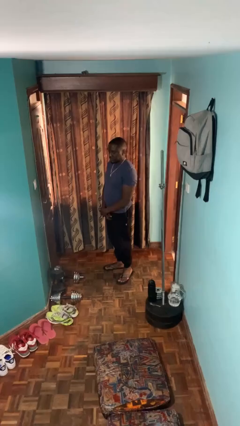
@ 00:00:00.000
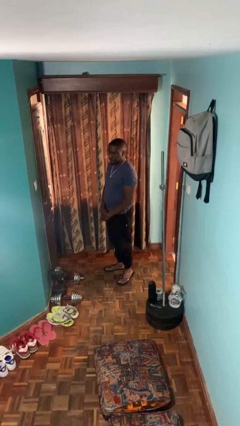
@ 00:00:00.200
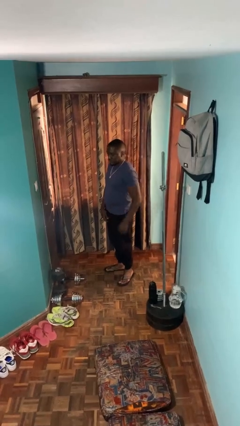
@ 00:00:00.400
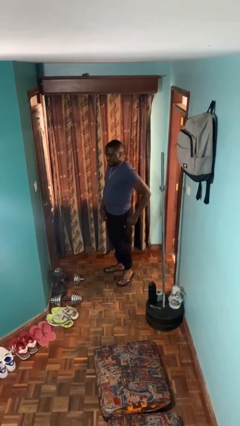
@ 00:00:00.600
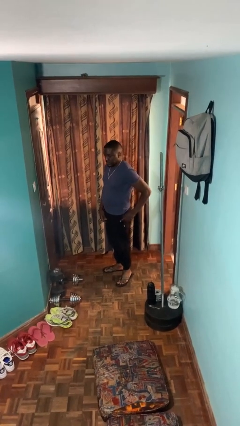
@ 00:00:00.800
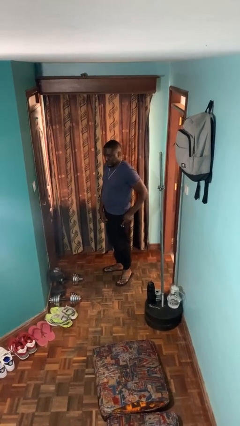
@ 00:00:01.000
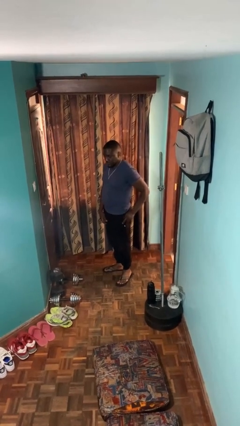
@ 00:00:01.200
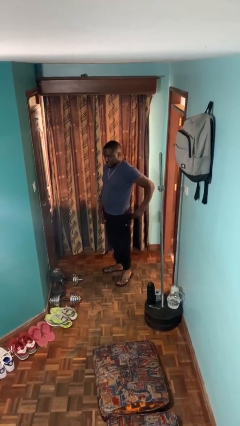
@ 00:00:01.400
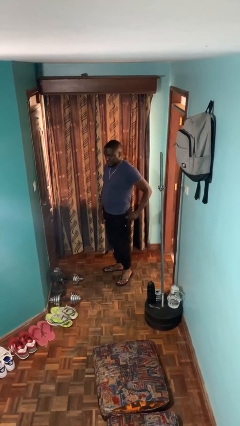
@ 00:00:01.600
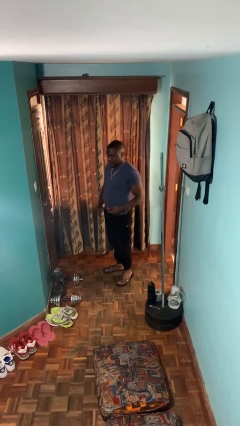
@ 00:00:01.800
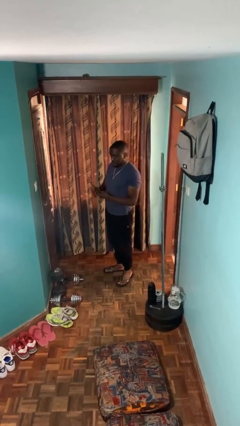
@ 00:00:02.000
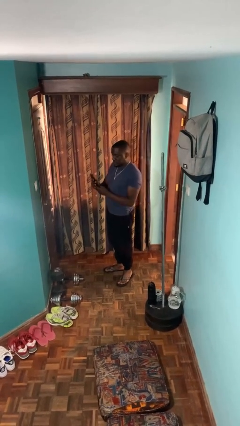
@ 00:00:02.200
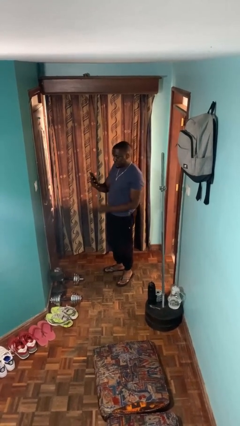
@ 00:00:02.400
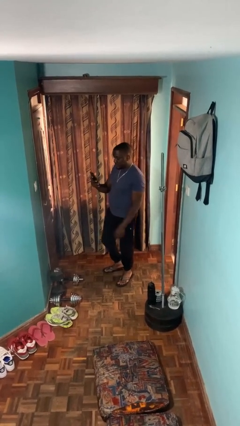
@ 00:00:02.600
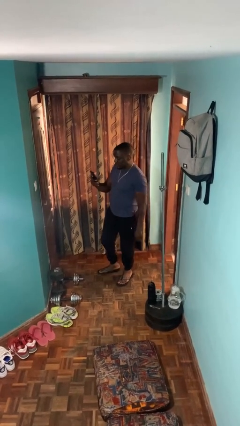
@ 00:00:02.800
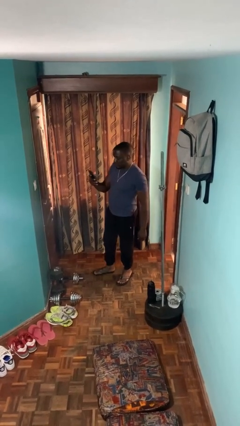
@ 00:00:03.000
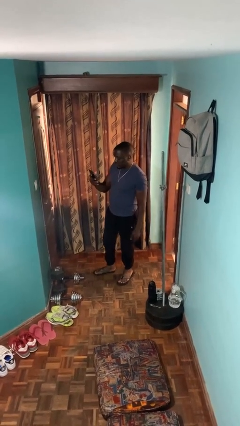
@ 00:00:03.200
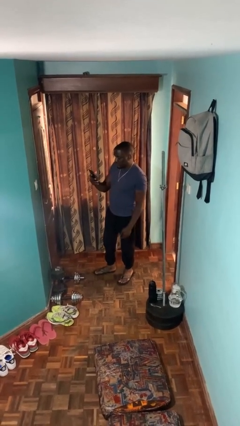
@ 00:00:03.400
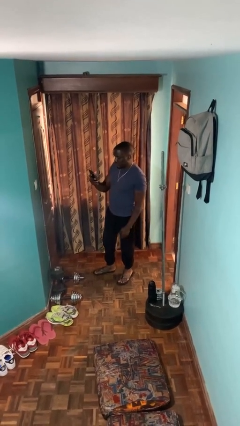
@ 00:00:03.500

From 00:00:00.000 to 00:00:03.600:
person takes phone from pocket

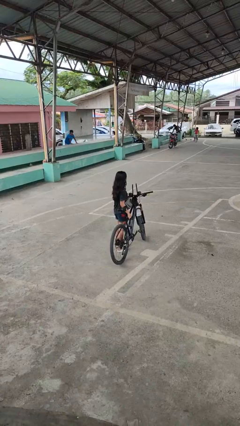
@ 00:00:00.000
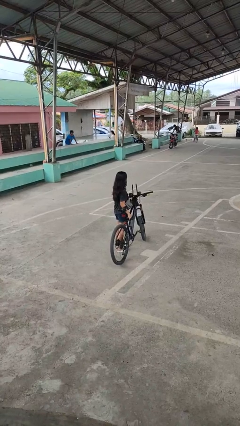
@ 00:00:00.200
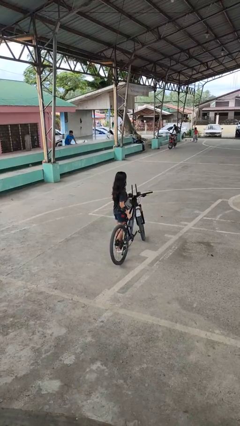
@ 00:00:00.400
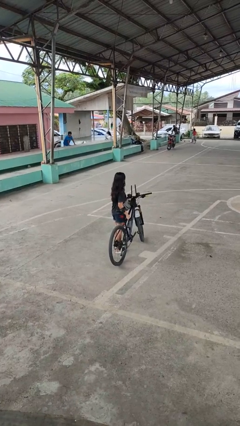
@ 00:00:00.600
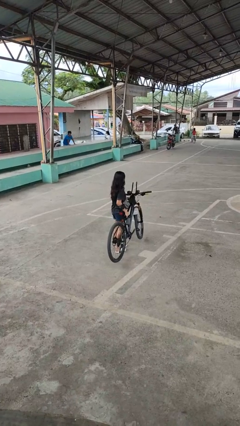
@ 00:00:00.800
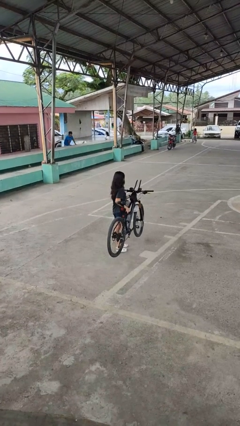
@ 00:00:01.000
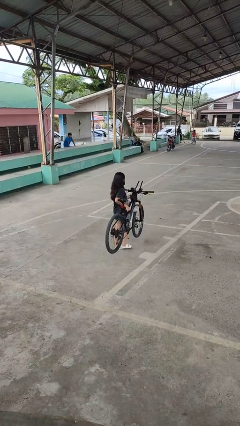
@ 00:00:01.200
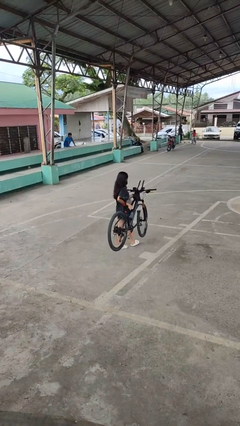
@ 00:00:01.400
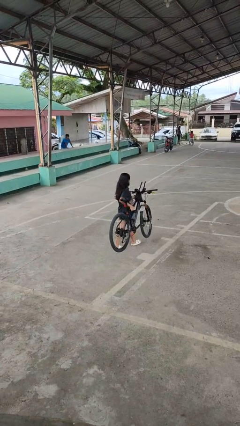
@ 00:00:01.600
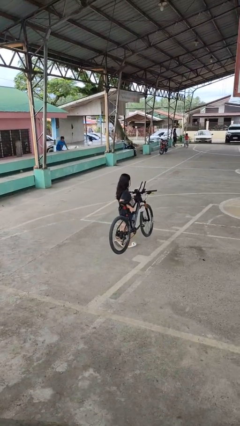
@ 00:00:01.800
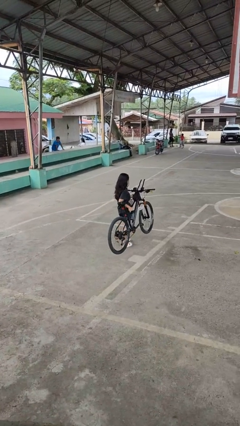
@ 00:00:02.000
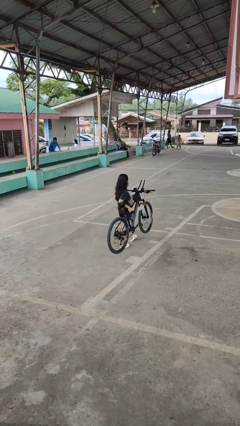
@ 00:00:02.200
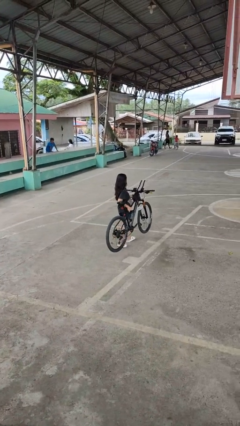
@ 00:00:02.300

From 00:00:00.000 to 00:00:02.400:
person carries bicycle

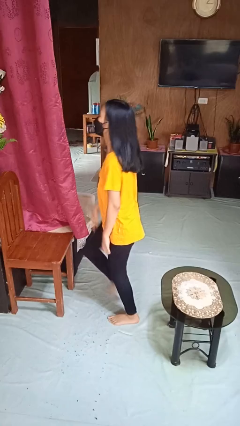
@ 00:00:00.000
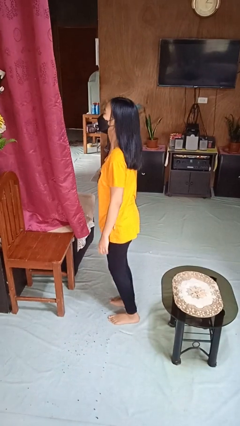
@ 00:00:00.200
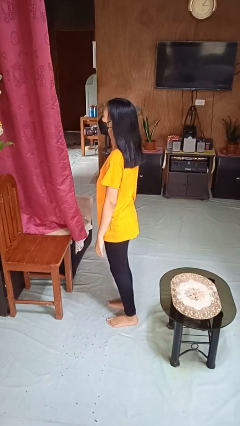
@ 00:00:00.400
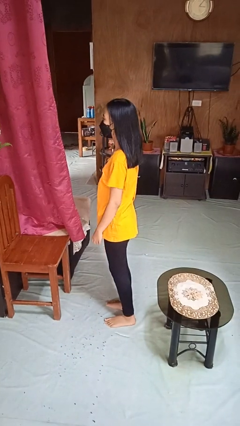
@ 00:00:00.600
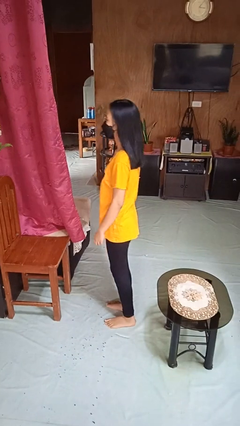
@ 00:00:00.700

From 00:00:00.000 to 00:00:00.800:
person climbs off chair

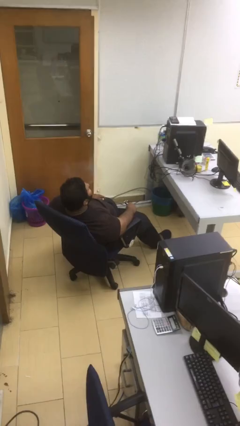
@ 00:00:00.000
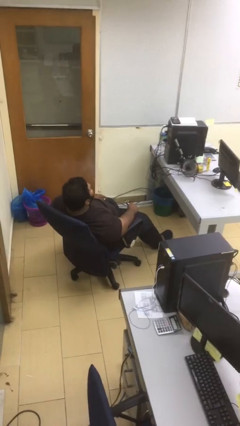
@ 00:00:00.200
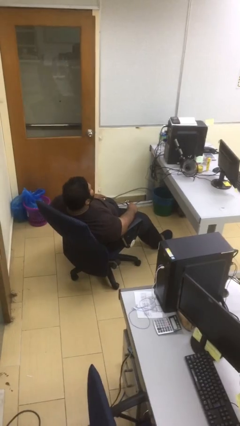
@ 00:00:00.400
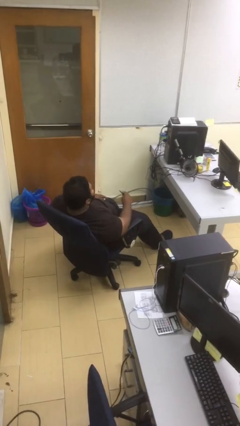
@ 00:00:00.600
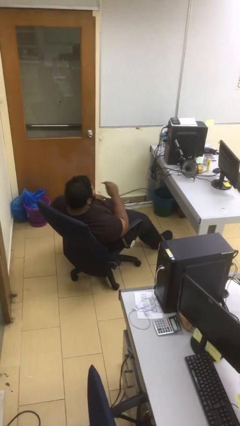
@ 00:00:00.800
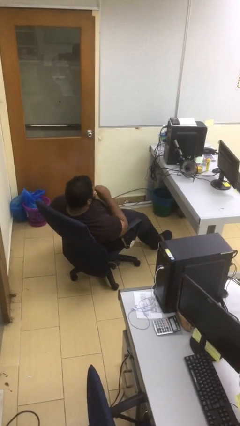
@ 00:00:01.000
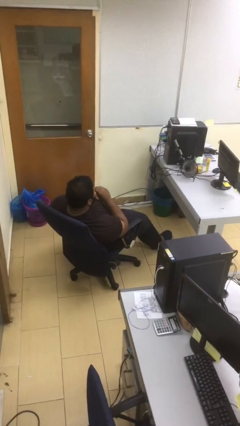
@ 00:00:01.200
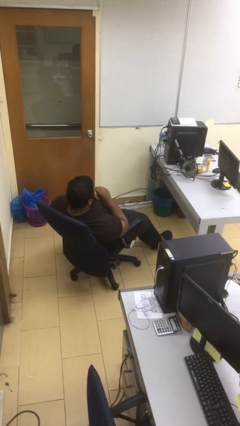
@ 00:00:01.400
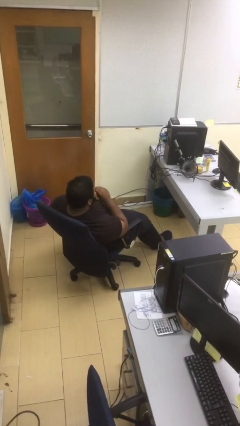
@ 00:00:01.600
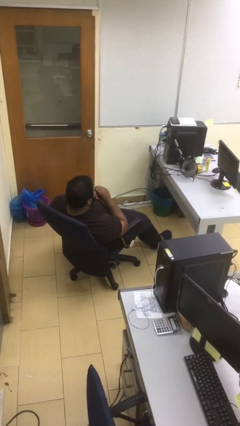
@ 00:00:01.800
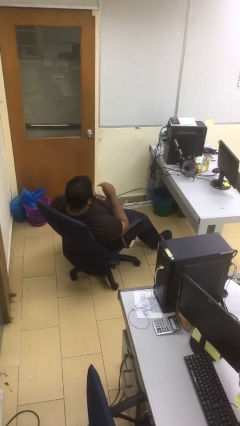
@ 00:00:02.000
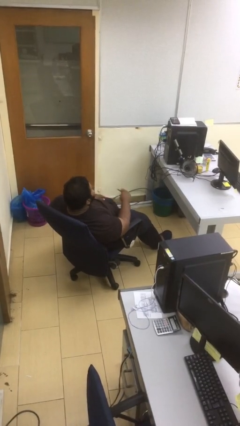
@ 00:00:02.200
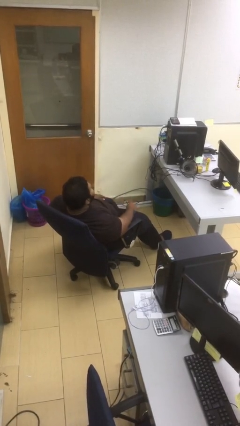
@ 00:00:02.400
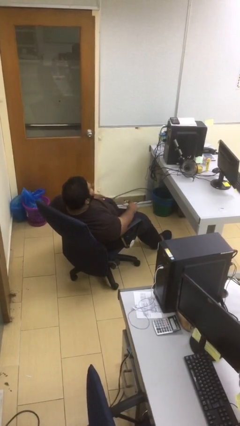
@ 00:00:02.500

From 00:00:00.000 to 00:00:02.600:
person vapes

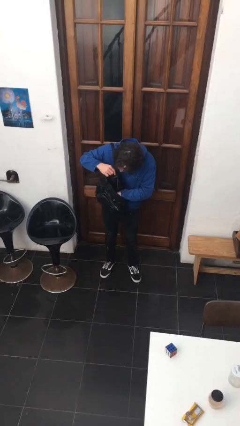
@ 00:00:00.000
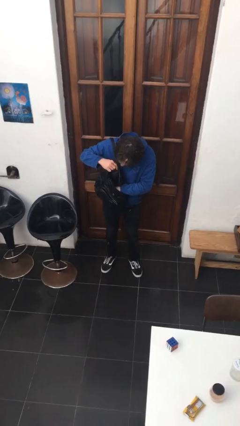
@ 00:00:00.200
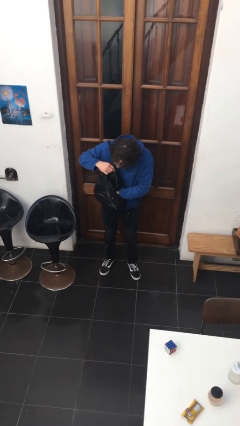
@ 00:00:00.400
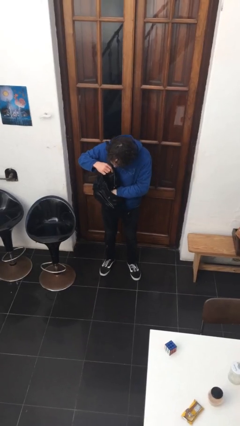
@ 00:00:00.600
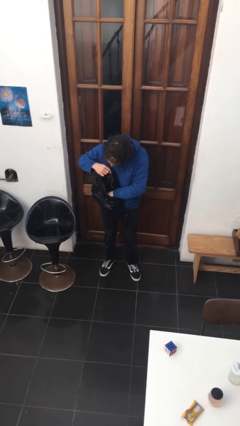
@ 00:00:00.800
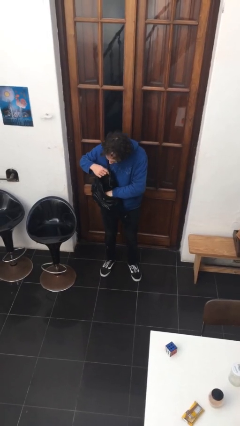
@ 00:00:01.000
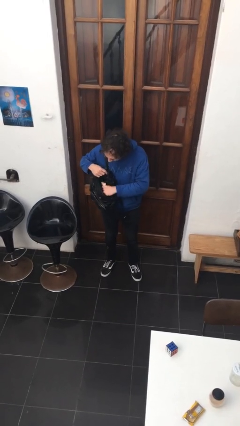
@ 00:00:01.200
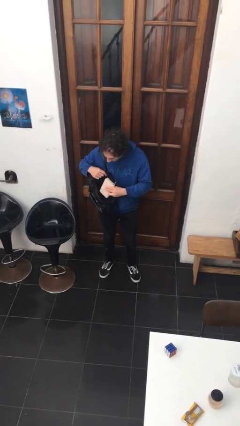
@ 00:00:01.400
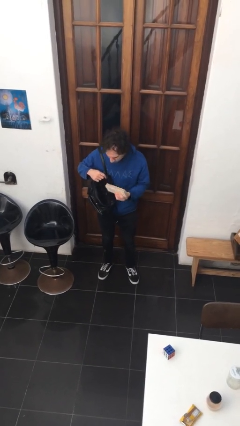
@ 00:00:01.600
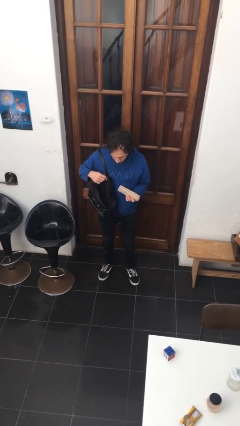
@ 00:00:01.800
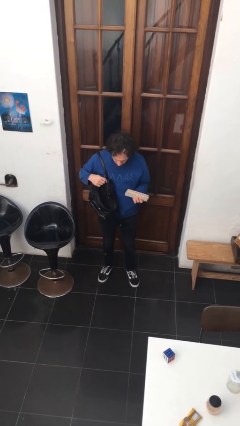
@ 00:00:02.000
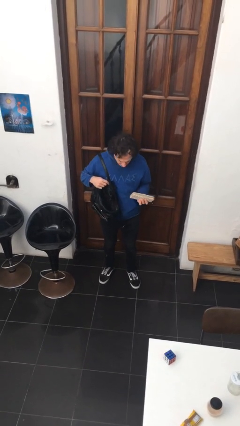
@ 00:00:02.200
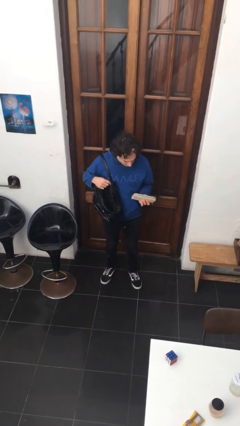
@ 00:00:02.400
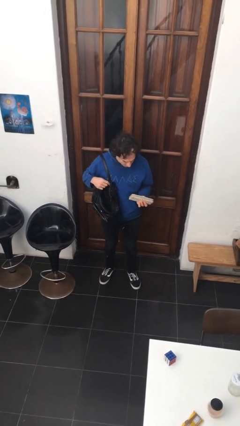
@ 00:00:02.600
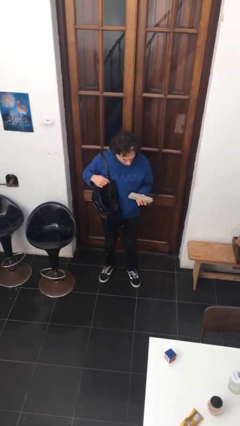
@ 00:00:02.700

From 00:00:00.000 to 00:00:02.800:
person takes object from purse

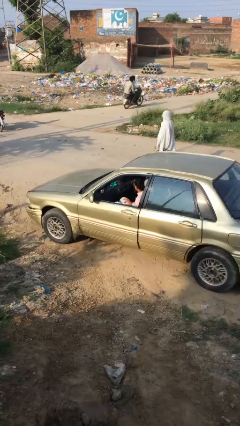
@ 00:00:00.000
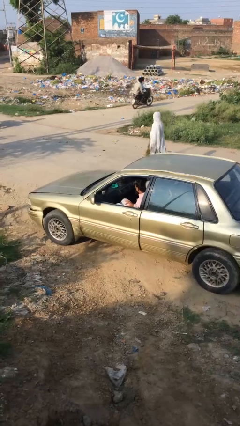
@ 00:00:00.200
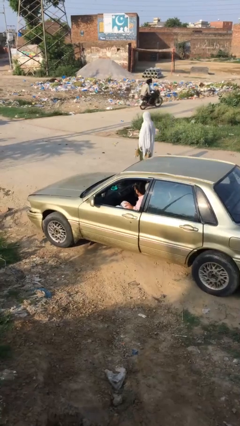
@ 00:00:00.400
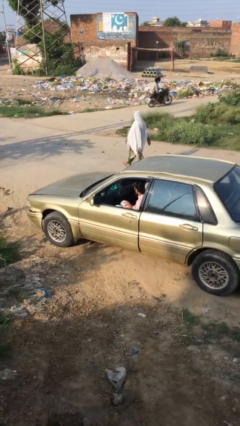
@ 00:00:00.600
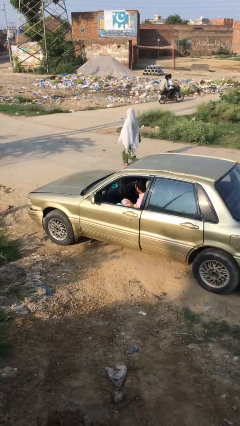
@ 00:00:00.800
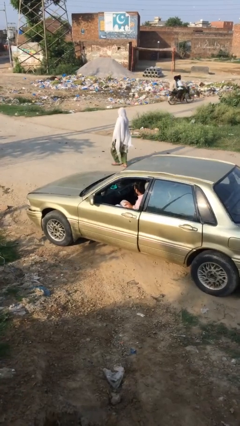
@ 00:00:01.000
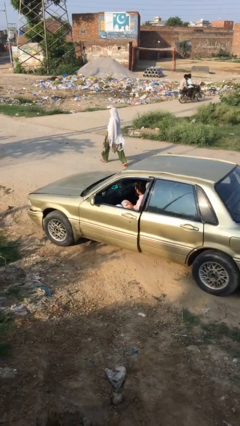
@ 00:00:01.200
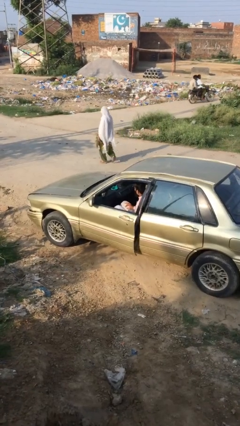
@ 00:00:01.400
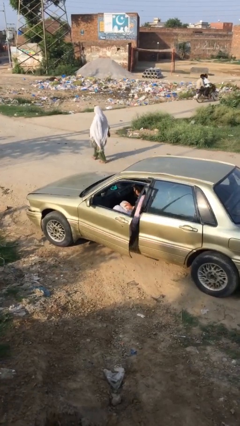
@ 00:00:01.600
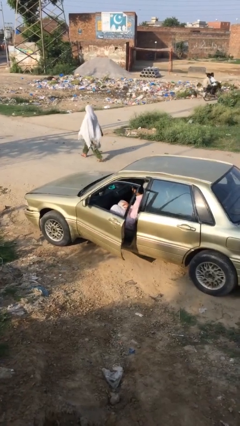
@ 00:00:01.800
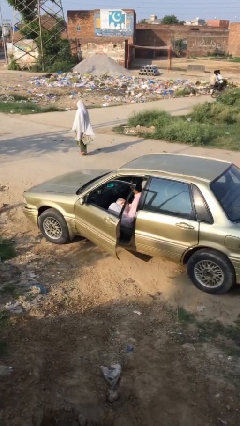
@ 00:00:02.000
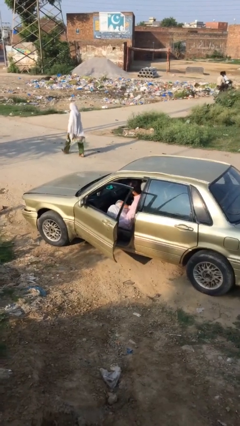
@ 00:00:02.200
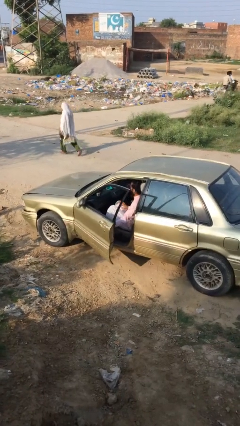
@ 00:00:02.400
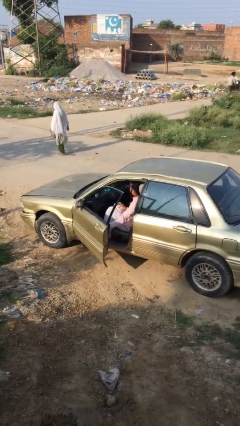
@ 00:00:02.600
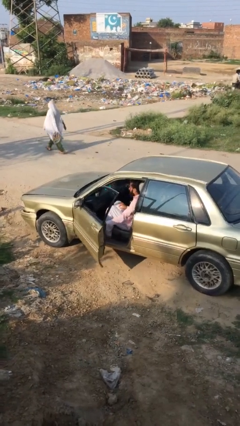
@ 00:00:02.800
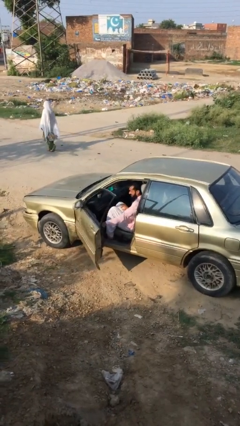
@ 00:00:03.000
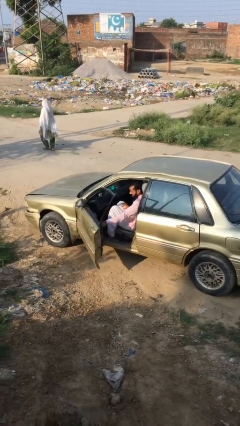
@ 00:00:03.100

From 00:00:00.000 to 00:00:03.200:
person opens car door

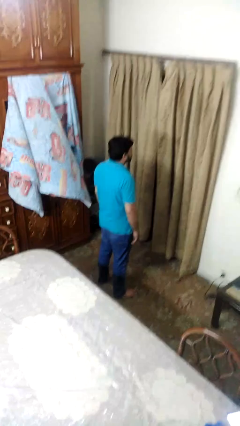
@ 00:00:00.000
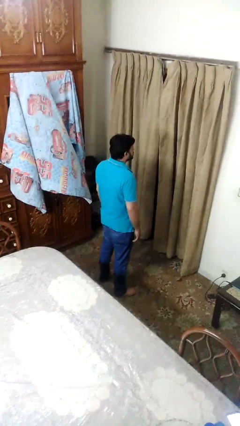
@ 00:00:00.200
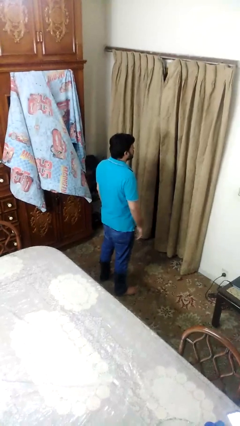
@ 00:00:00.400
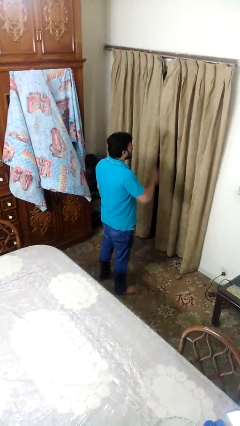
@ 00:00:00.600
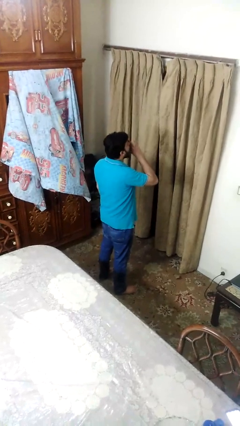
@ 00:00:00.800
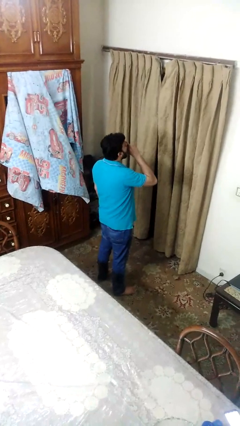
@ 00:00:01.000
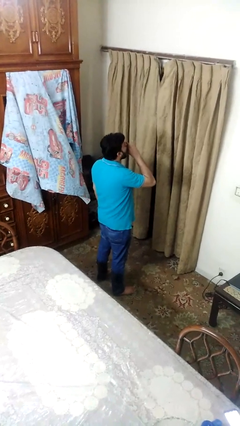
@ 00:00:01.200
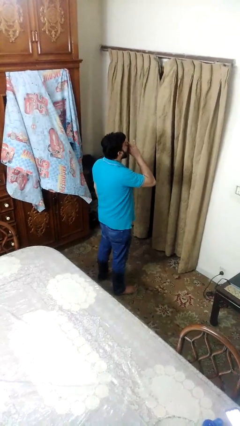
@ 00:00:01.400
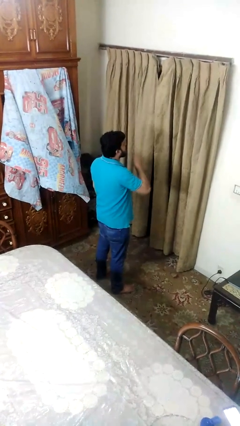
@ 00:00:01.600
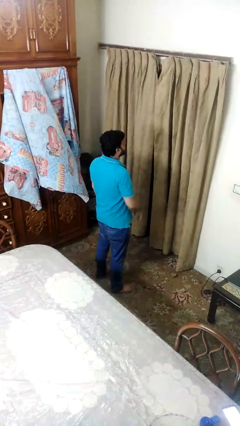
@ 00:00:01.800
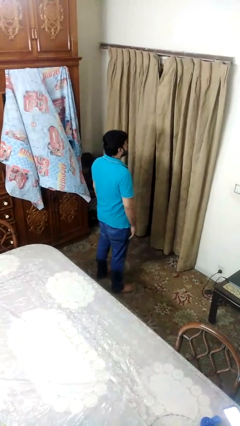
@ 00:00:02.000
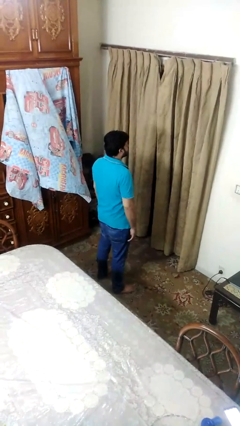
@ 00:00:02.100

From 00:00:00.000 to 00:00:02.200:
person yawns
